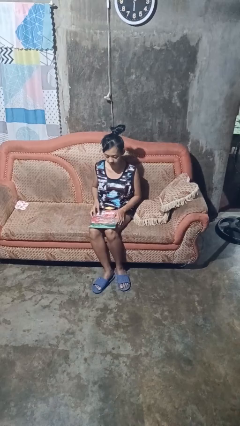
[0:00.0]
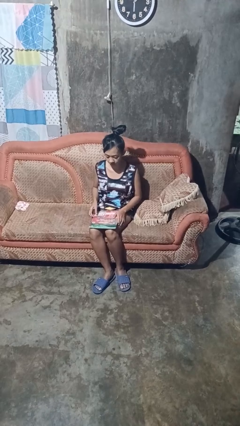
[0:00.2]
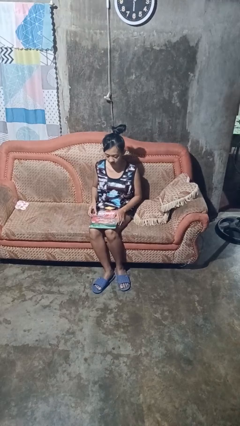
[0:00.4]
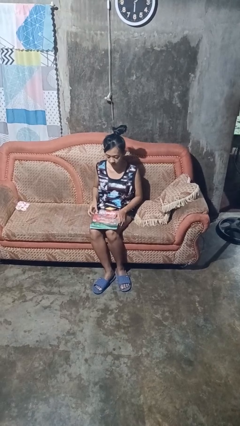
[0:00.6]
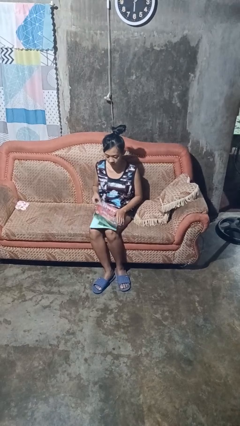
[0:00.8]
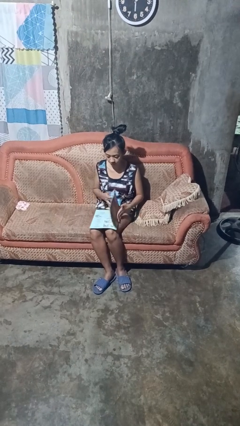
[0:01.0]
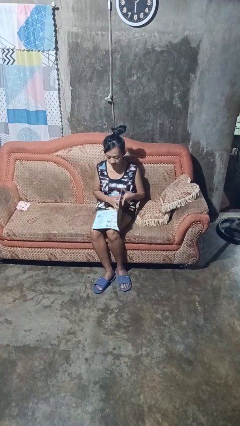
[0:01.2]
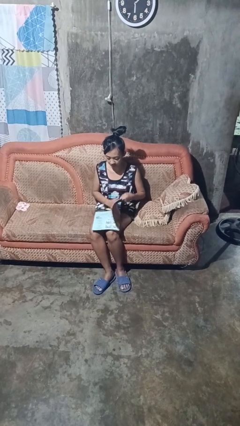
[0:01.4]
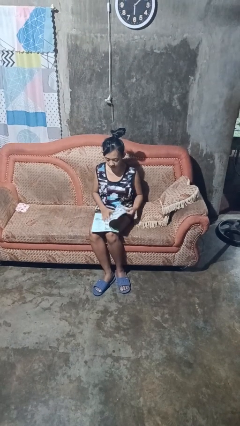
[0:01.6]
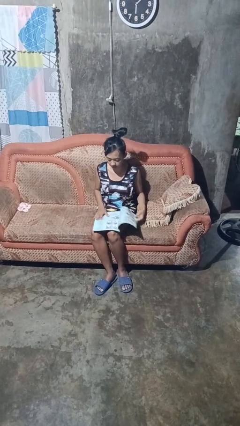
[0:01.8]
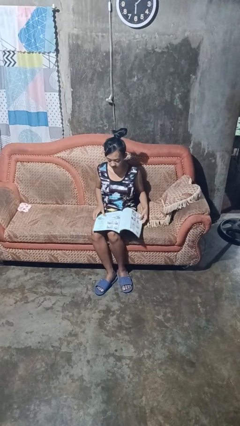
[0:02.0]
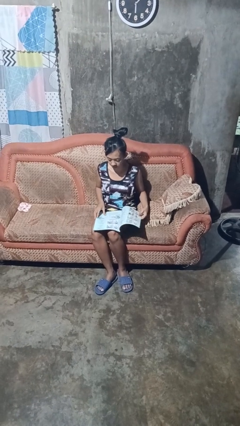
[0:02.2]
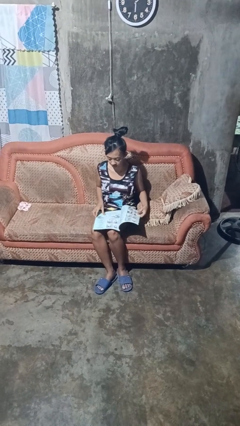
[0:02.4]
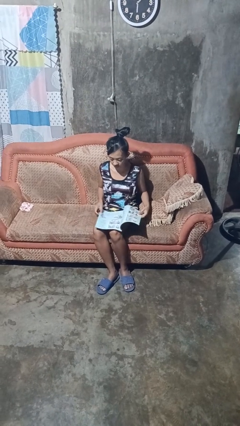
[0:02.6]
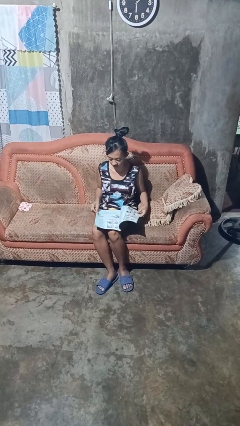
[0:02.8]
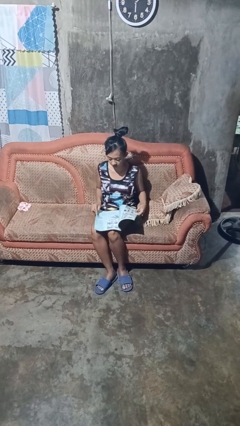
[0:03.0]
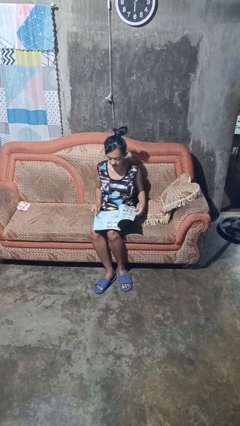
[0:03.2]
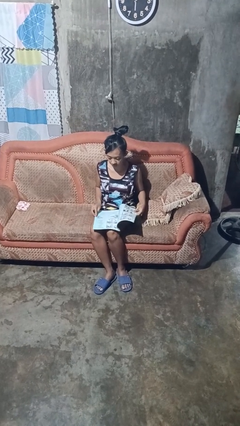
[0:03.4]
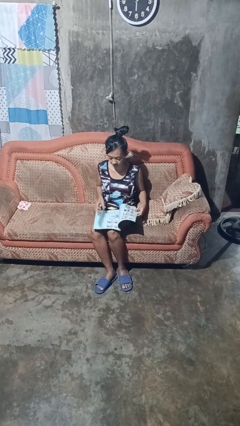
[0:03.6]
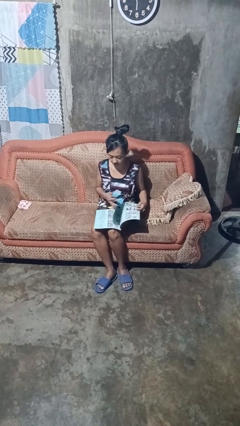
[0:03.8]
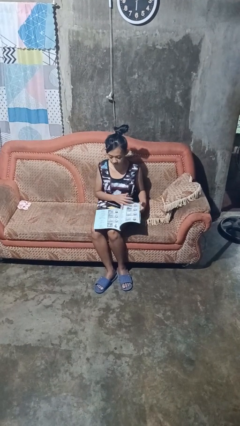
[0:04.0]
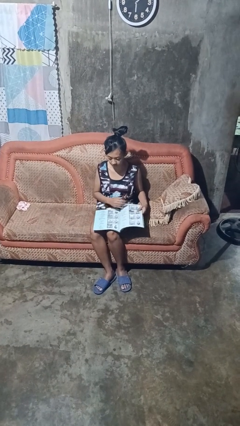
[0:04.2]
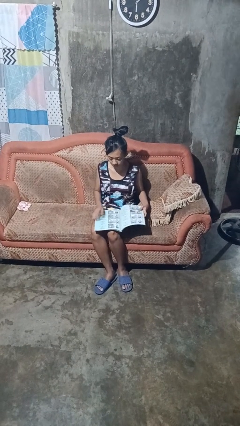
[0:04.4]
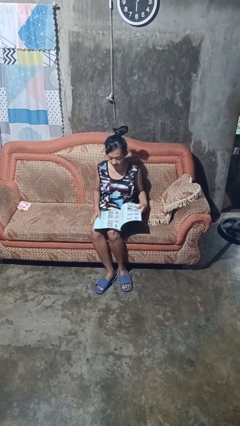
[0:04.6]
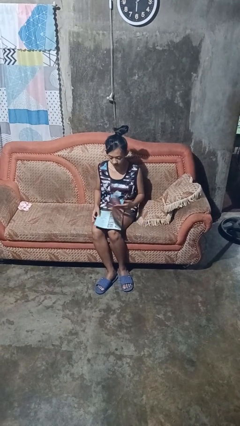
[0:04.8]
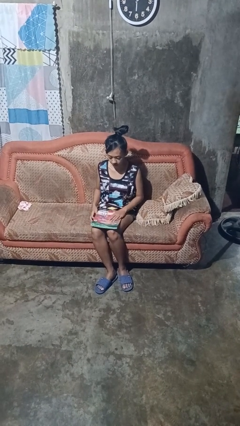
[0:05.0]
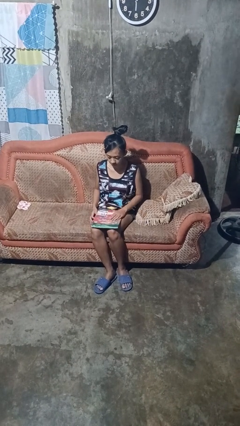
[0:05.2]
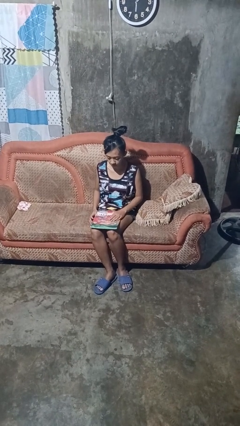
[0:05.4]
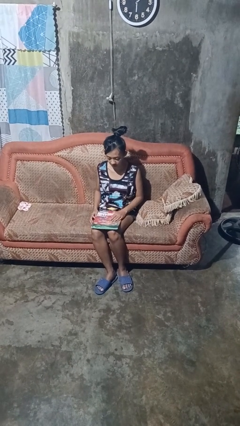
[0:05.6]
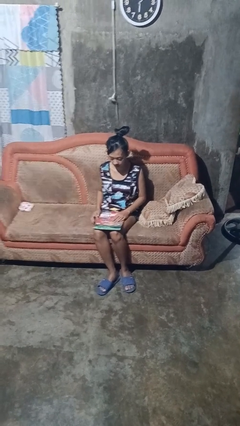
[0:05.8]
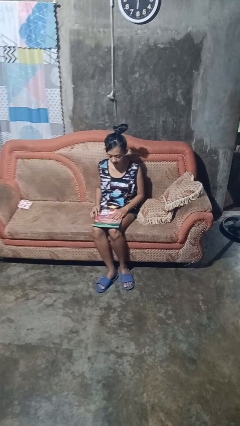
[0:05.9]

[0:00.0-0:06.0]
person reads magazine

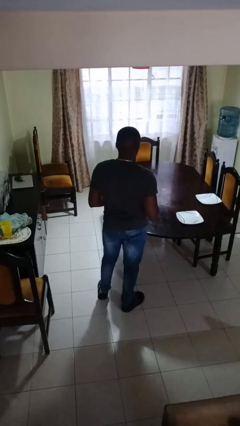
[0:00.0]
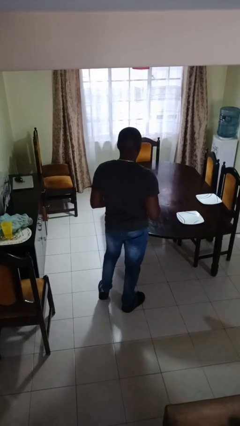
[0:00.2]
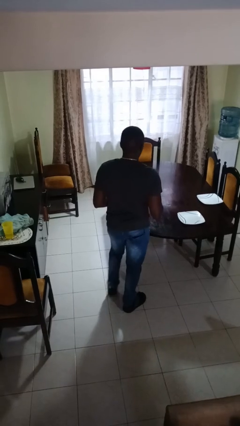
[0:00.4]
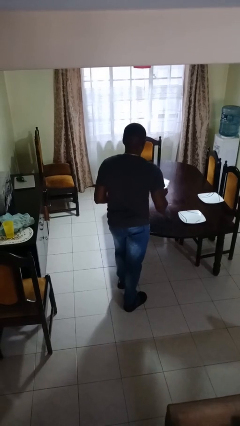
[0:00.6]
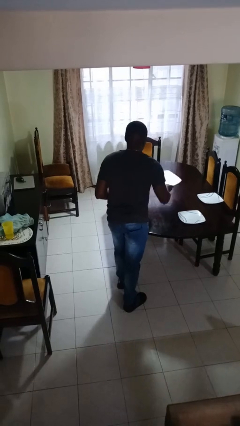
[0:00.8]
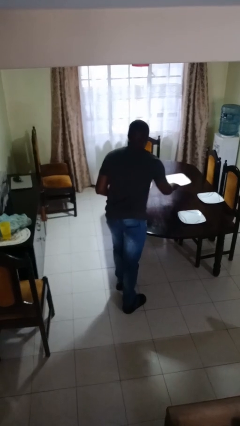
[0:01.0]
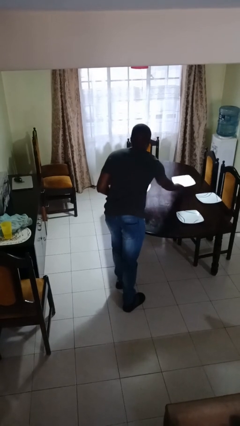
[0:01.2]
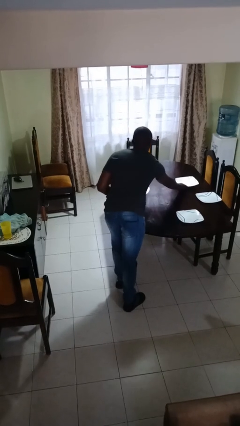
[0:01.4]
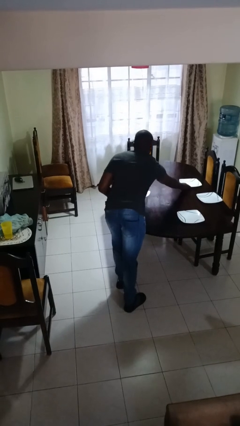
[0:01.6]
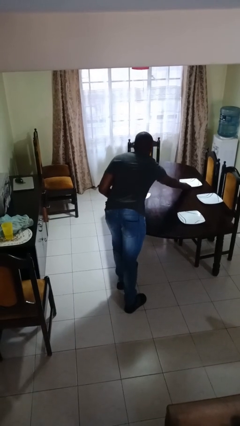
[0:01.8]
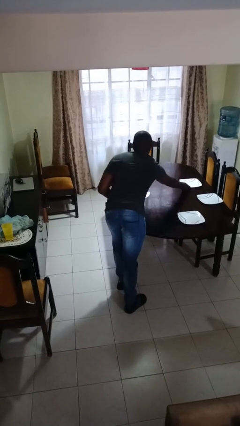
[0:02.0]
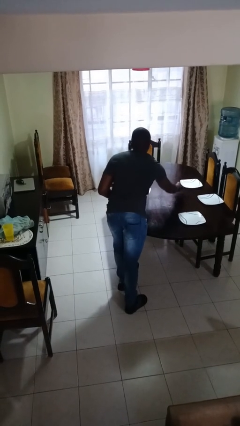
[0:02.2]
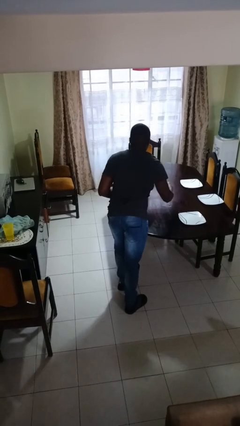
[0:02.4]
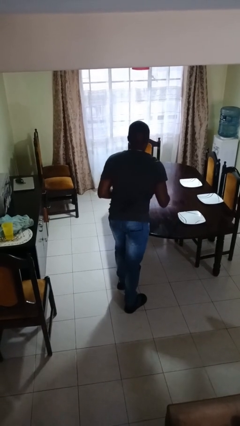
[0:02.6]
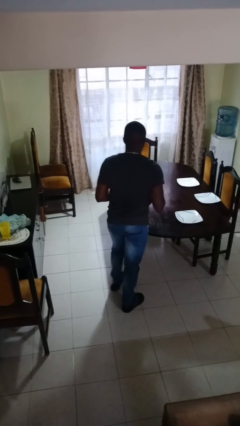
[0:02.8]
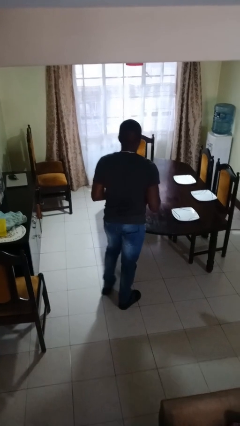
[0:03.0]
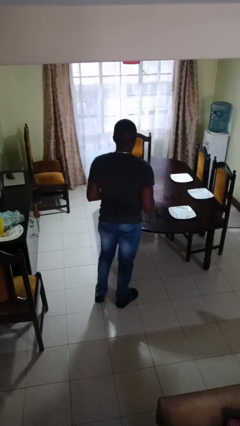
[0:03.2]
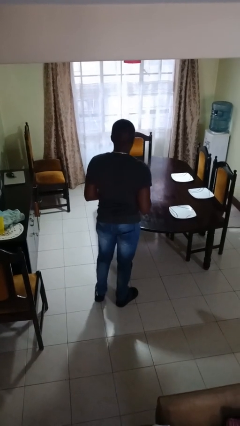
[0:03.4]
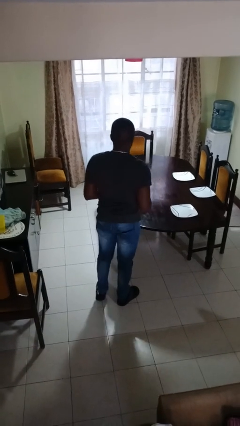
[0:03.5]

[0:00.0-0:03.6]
person sets table

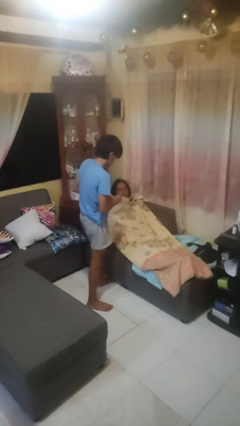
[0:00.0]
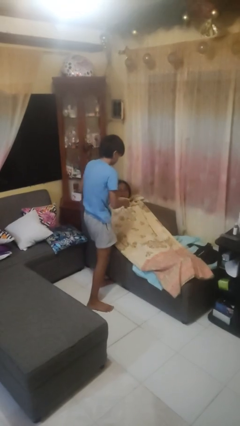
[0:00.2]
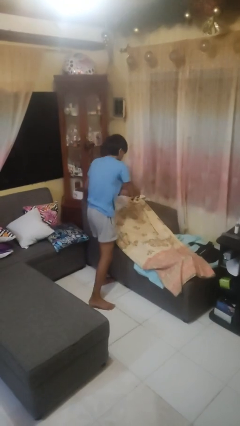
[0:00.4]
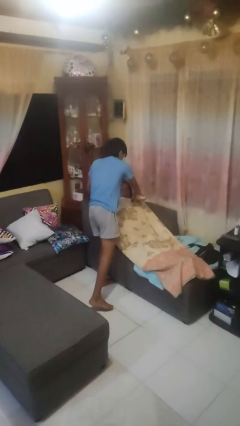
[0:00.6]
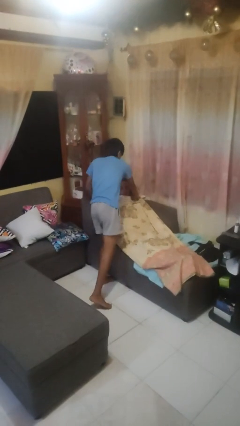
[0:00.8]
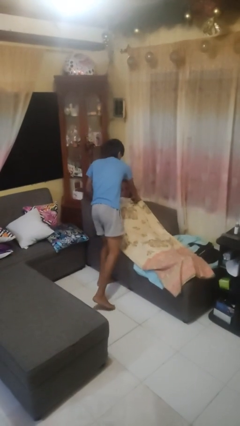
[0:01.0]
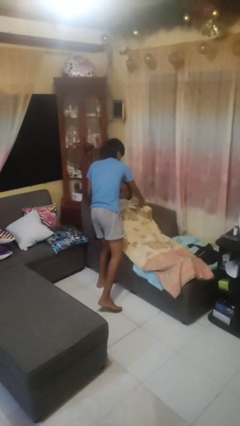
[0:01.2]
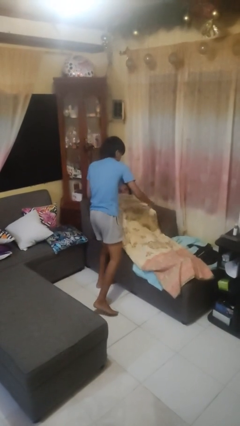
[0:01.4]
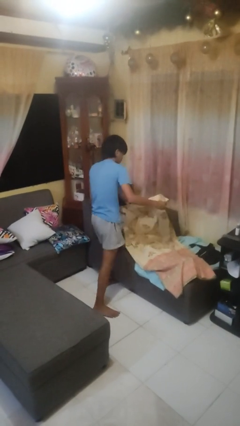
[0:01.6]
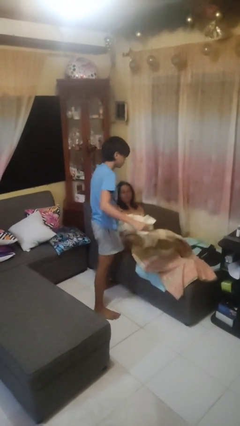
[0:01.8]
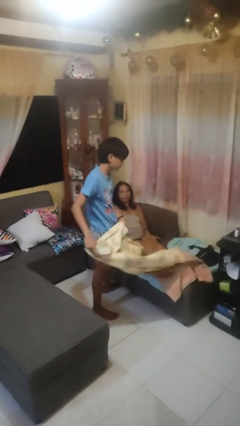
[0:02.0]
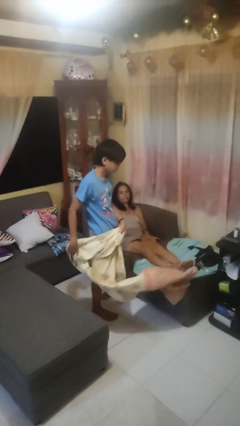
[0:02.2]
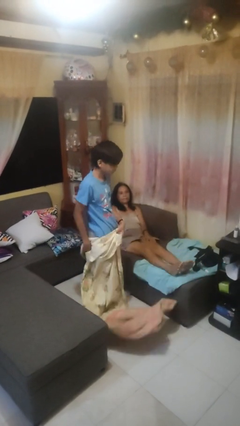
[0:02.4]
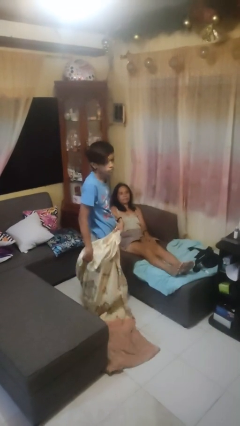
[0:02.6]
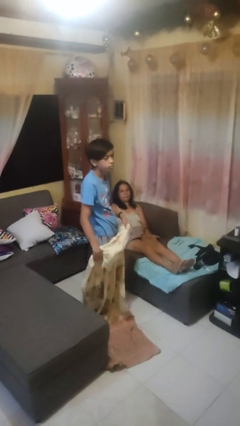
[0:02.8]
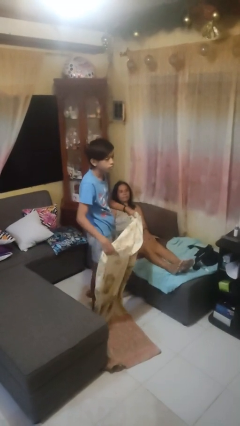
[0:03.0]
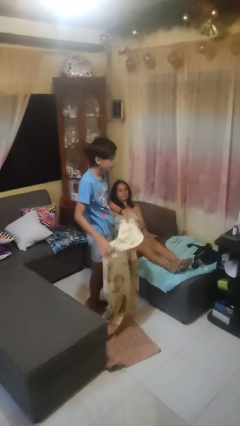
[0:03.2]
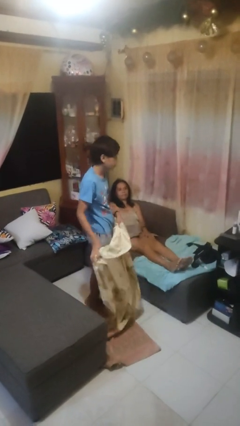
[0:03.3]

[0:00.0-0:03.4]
person uncovers friend with blanket

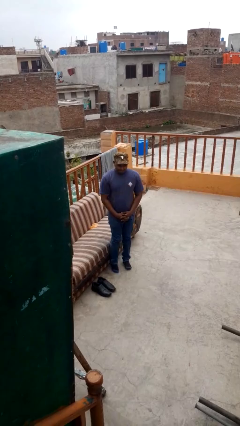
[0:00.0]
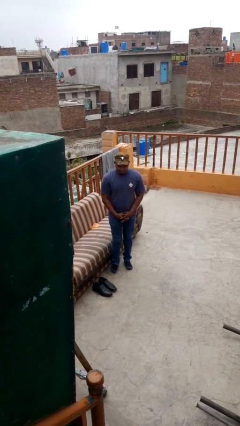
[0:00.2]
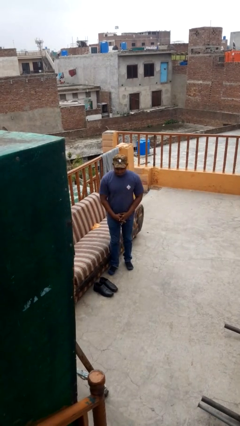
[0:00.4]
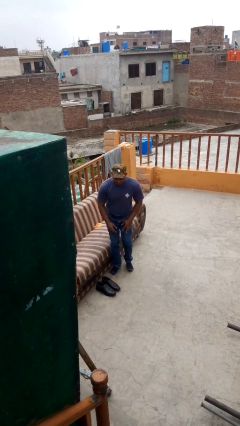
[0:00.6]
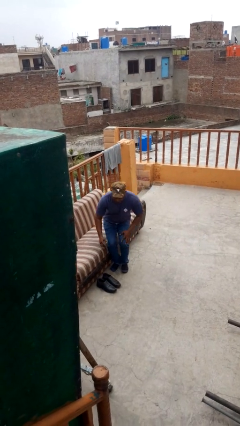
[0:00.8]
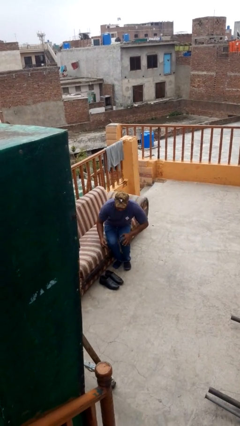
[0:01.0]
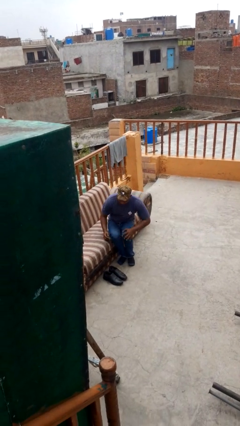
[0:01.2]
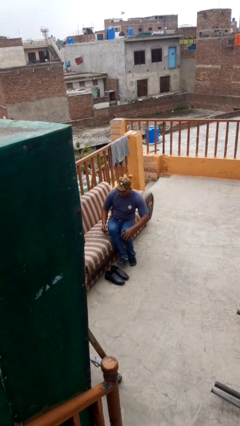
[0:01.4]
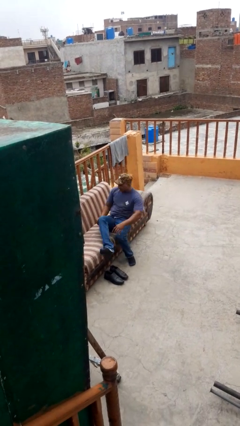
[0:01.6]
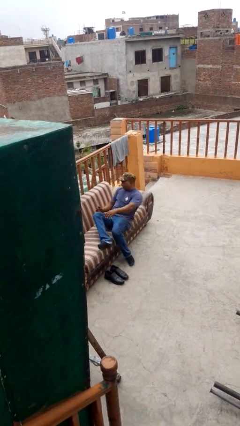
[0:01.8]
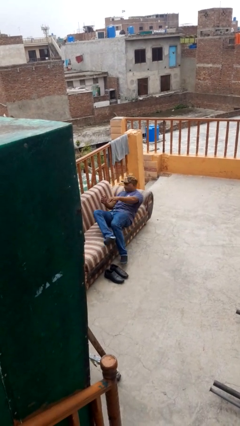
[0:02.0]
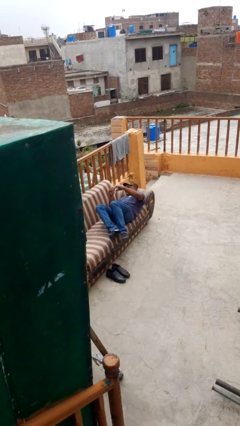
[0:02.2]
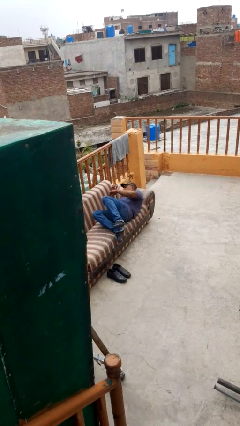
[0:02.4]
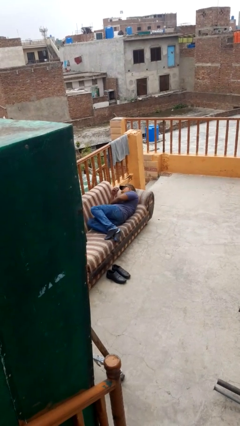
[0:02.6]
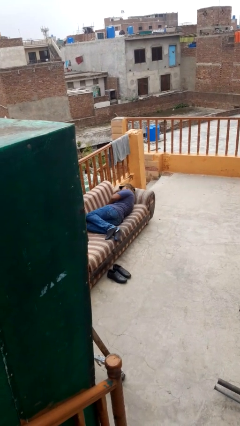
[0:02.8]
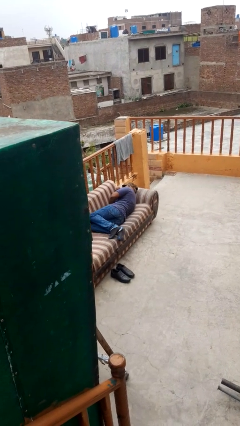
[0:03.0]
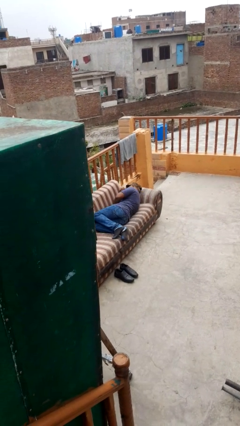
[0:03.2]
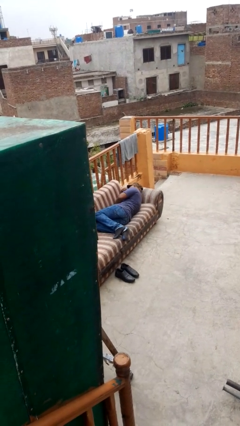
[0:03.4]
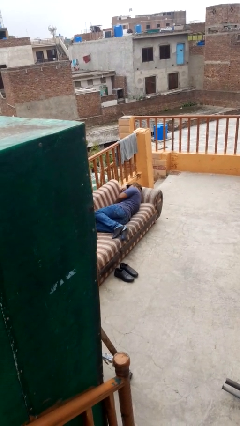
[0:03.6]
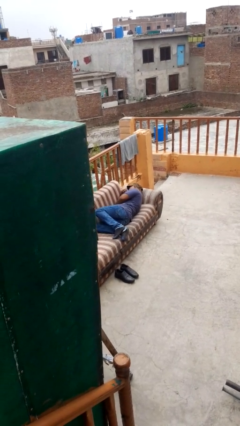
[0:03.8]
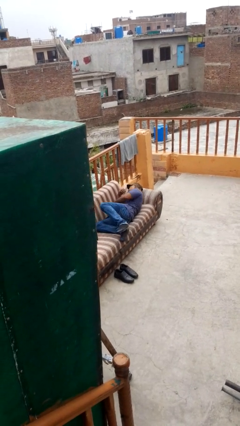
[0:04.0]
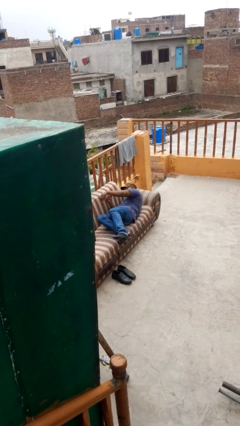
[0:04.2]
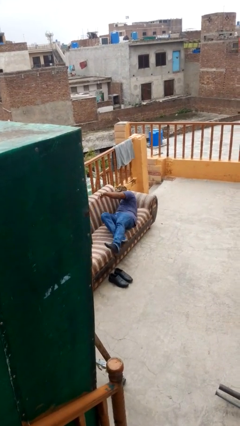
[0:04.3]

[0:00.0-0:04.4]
person lies down on couch

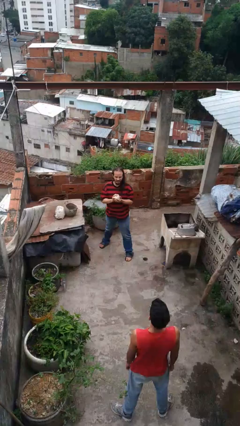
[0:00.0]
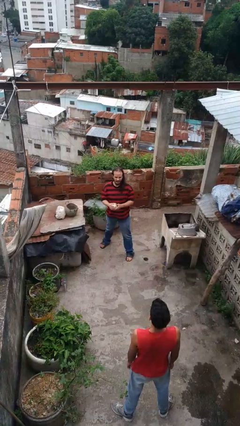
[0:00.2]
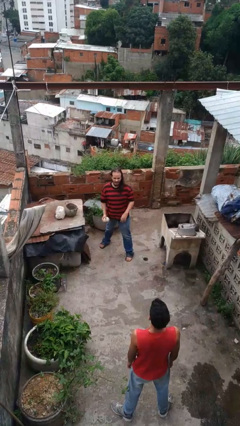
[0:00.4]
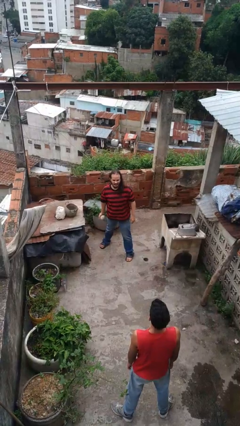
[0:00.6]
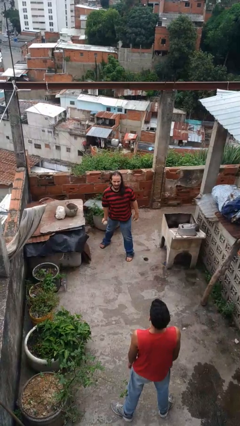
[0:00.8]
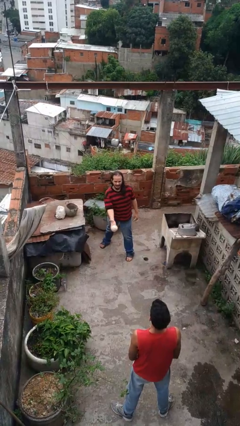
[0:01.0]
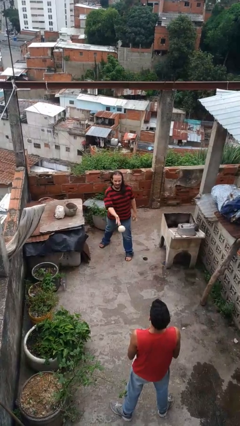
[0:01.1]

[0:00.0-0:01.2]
person throws object to person
